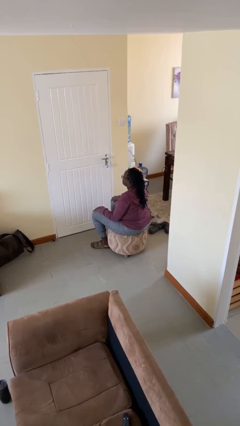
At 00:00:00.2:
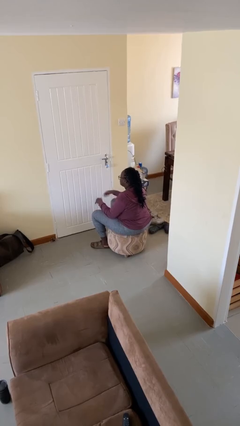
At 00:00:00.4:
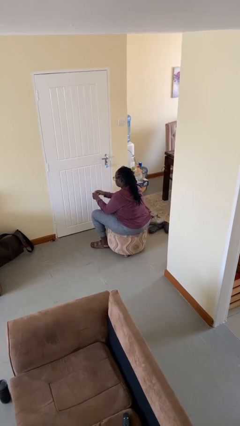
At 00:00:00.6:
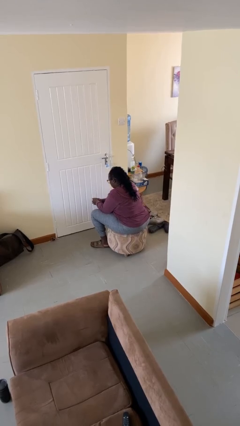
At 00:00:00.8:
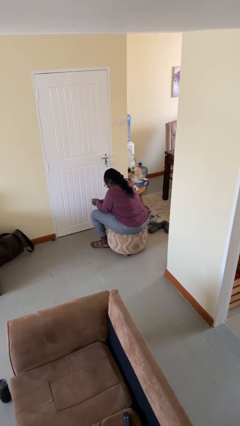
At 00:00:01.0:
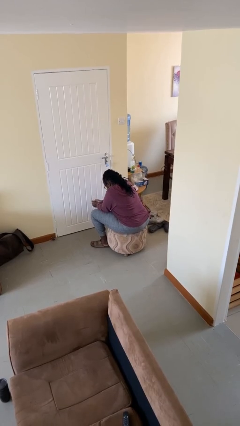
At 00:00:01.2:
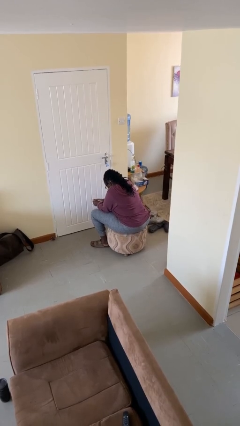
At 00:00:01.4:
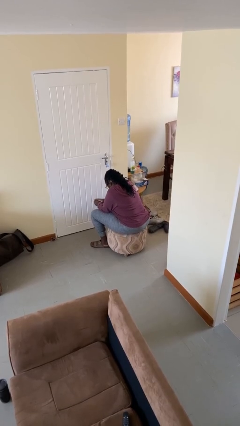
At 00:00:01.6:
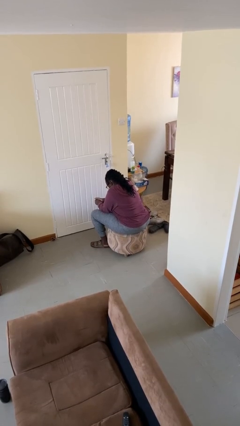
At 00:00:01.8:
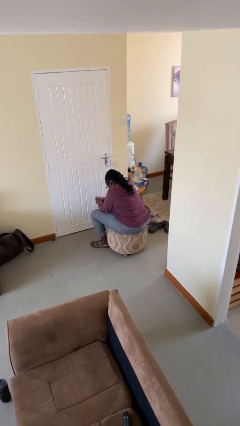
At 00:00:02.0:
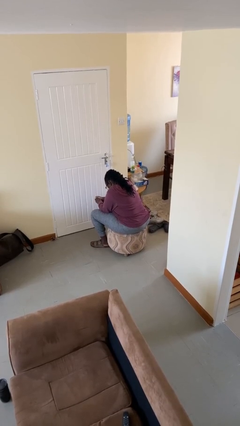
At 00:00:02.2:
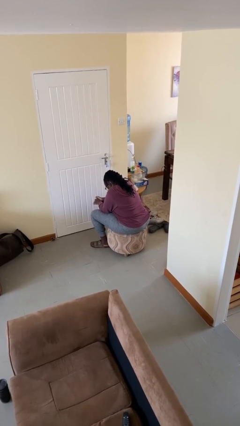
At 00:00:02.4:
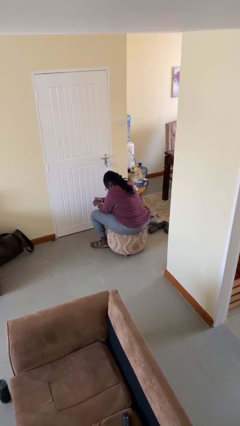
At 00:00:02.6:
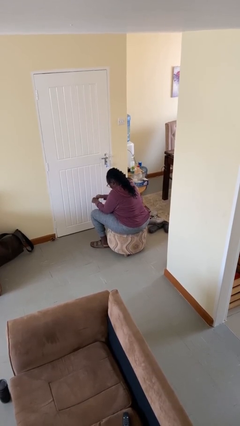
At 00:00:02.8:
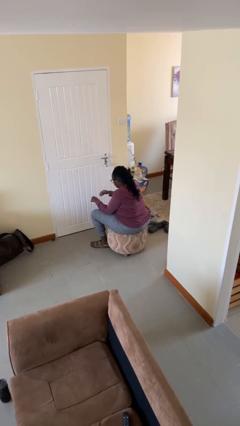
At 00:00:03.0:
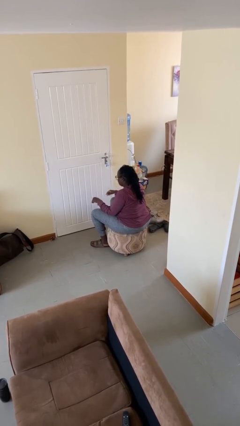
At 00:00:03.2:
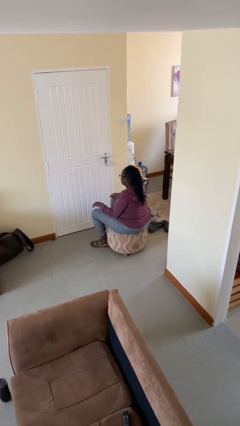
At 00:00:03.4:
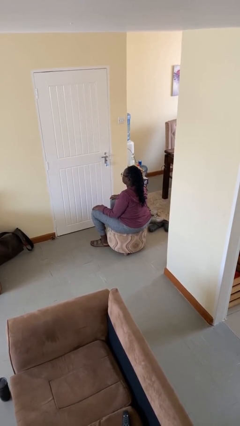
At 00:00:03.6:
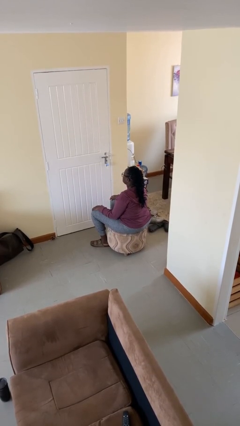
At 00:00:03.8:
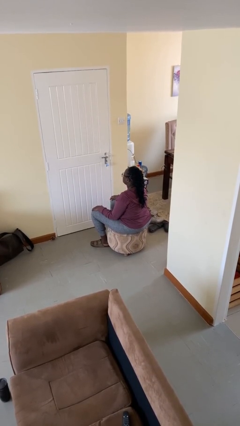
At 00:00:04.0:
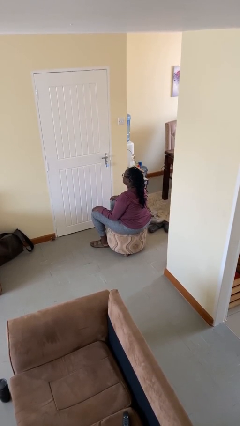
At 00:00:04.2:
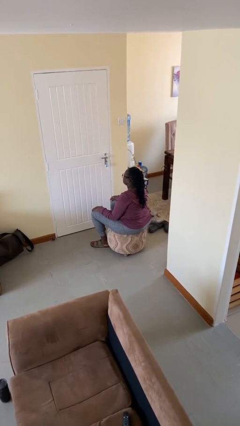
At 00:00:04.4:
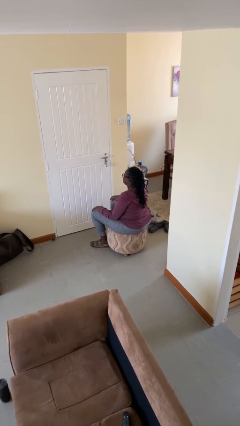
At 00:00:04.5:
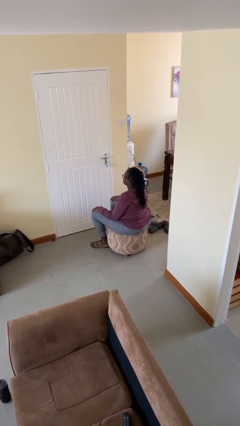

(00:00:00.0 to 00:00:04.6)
person looks at hands in lap

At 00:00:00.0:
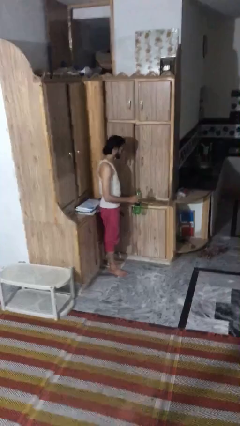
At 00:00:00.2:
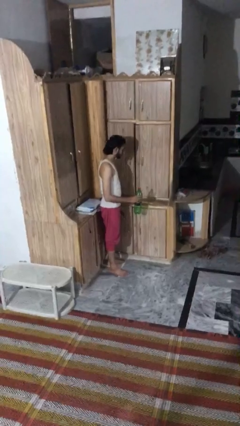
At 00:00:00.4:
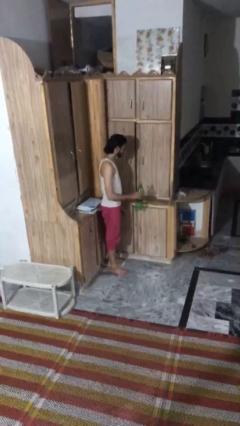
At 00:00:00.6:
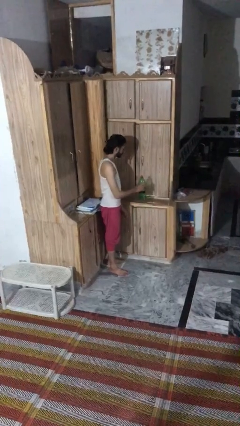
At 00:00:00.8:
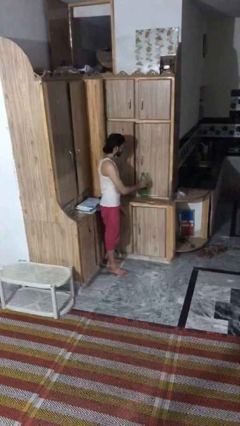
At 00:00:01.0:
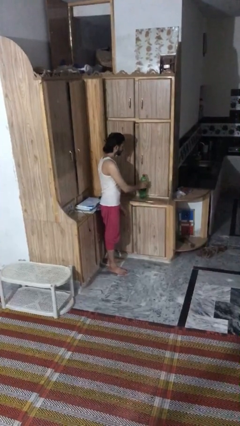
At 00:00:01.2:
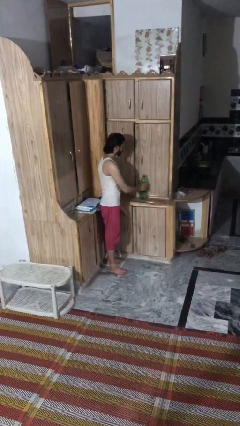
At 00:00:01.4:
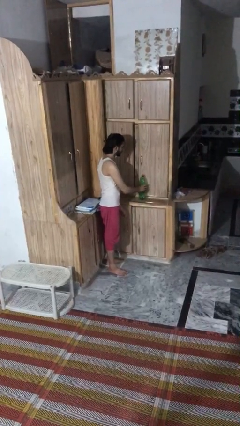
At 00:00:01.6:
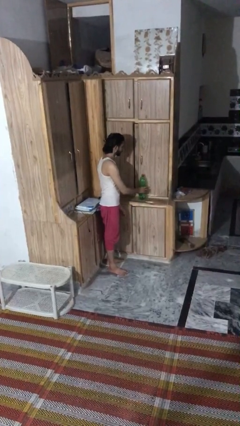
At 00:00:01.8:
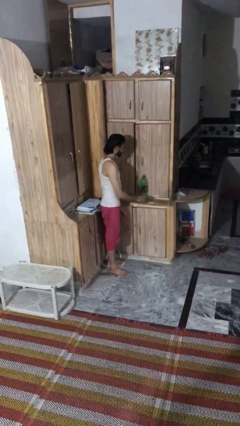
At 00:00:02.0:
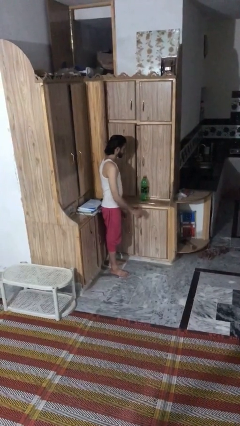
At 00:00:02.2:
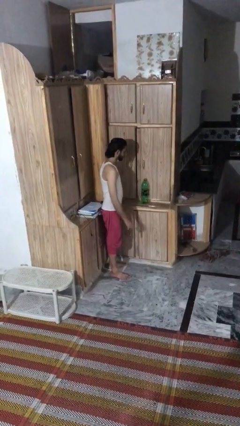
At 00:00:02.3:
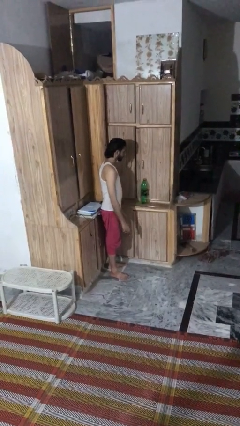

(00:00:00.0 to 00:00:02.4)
person puts down object on countertop

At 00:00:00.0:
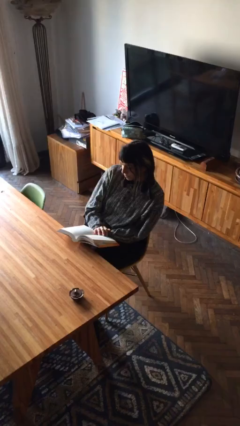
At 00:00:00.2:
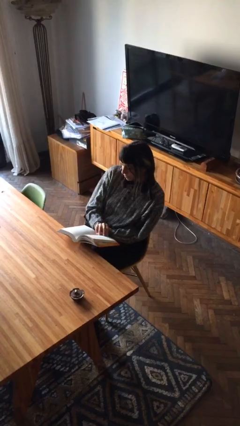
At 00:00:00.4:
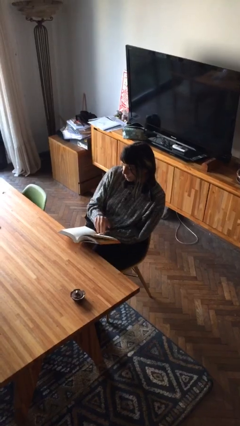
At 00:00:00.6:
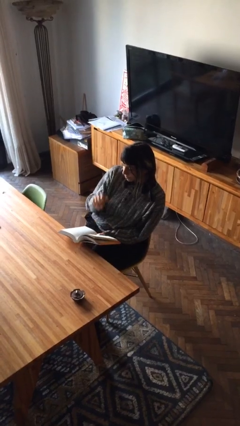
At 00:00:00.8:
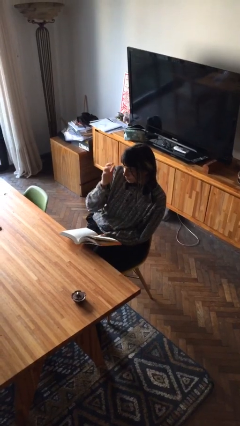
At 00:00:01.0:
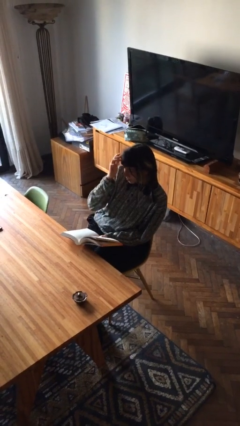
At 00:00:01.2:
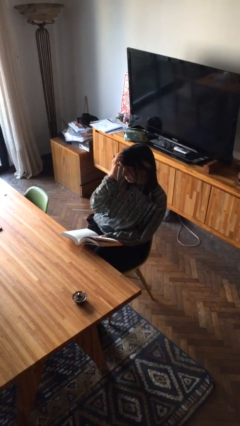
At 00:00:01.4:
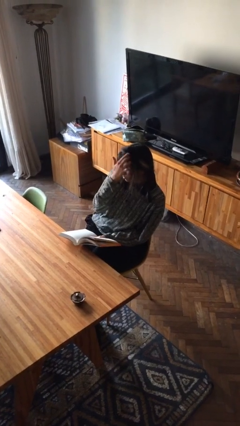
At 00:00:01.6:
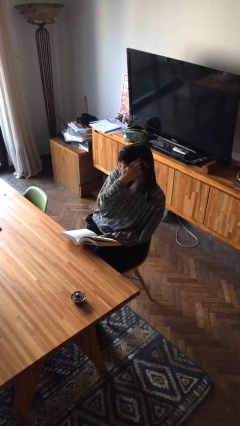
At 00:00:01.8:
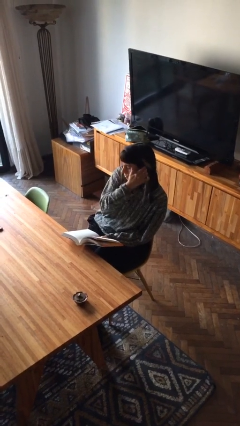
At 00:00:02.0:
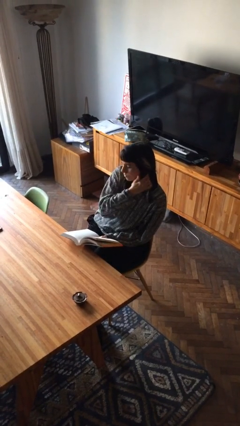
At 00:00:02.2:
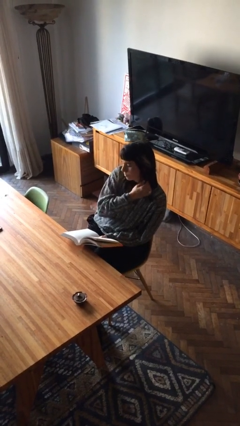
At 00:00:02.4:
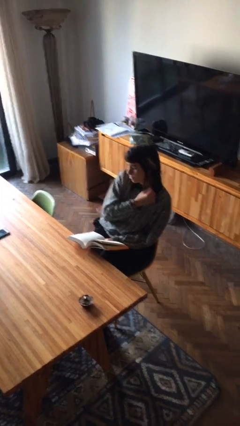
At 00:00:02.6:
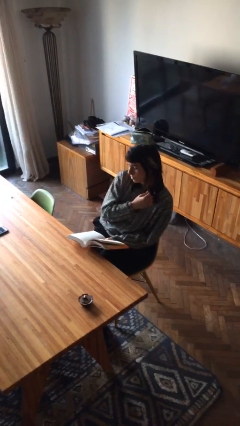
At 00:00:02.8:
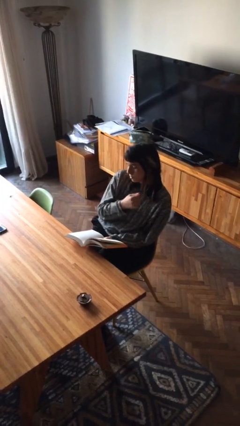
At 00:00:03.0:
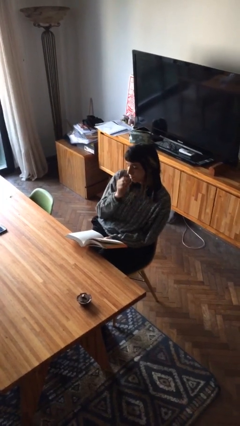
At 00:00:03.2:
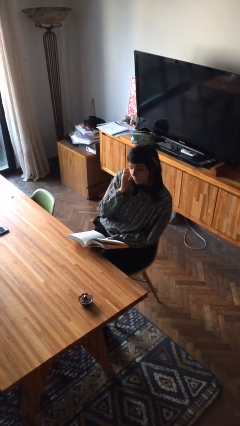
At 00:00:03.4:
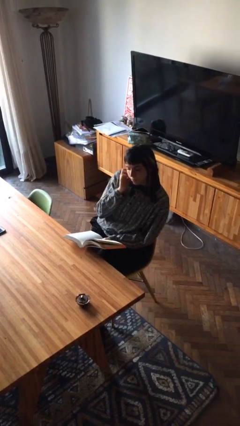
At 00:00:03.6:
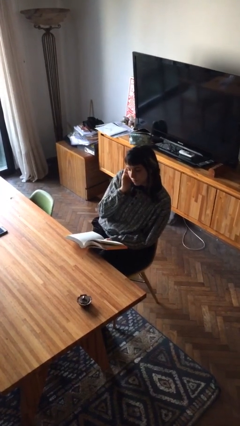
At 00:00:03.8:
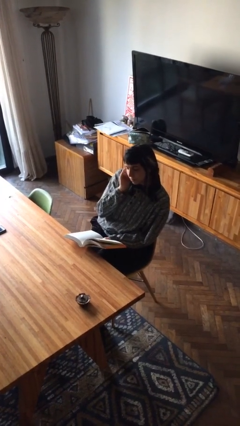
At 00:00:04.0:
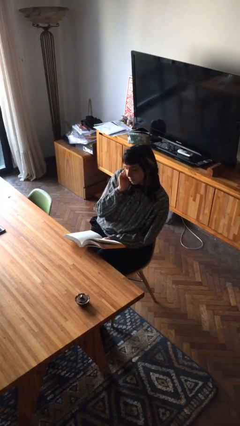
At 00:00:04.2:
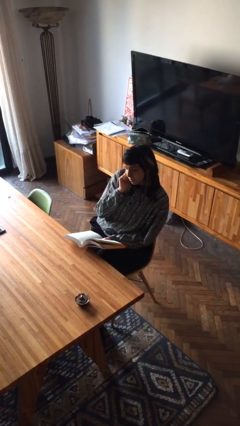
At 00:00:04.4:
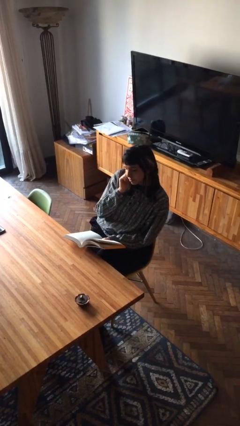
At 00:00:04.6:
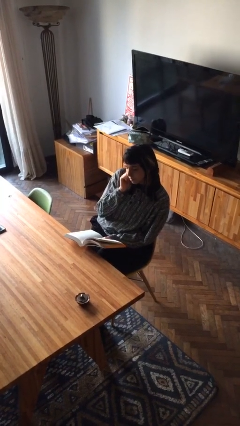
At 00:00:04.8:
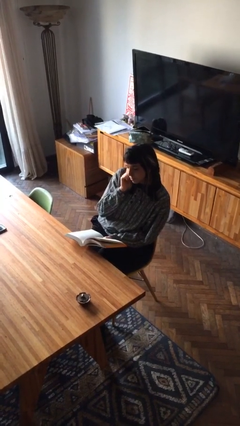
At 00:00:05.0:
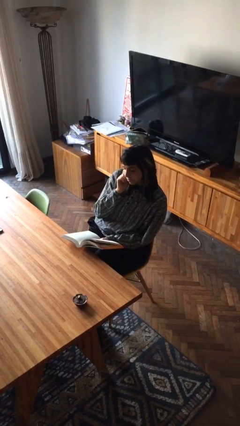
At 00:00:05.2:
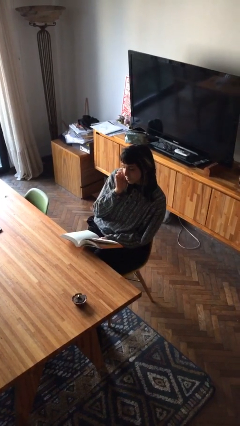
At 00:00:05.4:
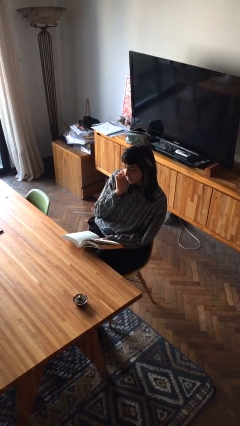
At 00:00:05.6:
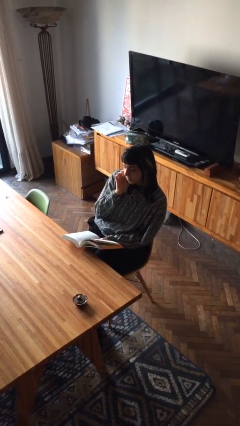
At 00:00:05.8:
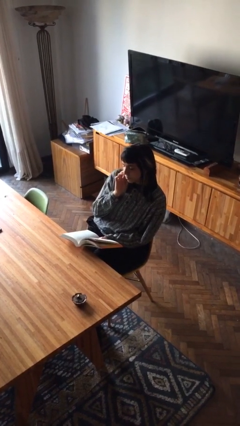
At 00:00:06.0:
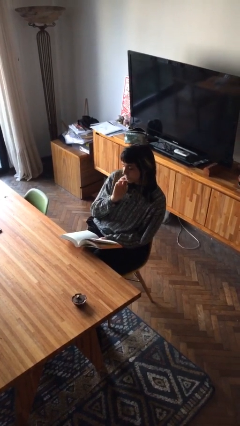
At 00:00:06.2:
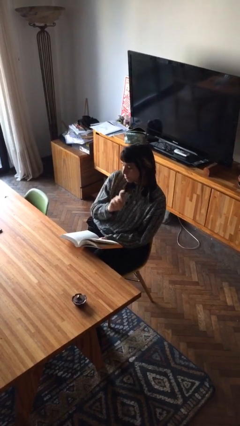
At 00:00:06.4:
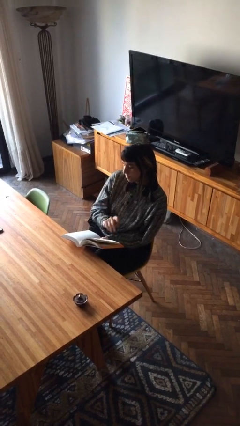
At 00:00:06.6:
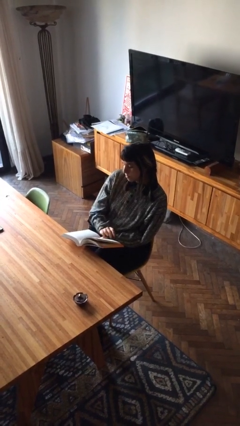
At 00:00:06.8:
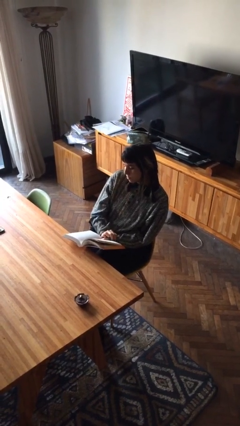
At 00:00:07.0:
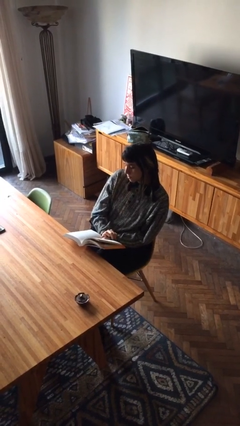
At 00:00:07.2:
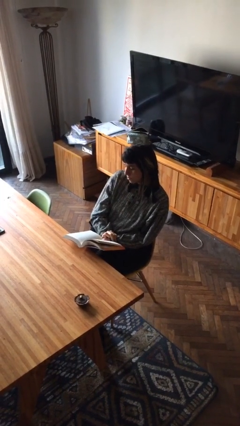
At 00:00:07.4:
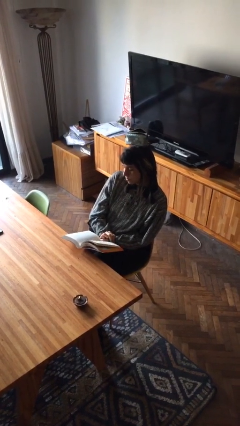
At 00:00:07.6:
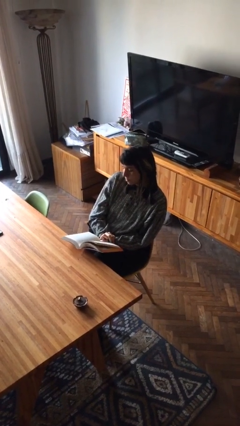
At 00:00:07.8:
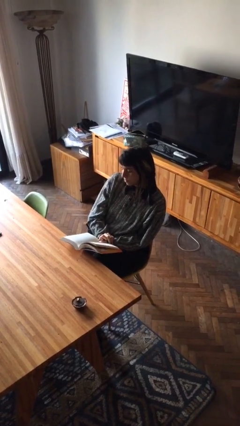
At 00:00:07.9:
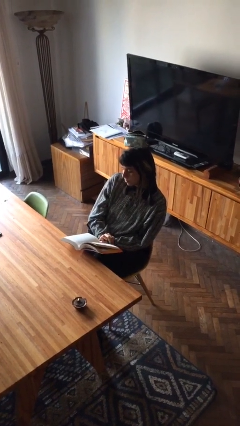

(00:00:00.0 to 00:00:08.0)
person reads document

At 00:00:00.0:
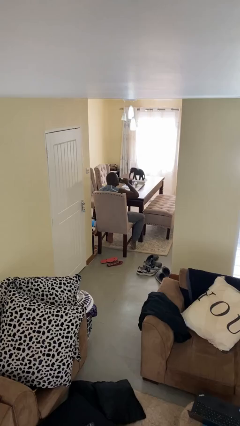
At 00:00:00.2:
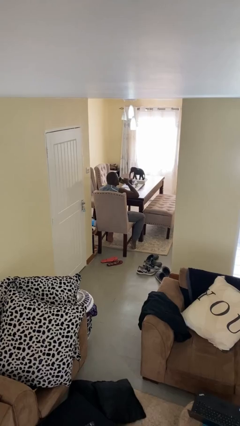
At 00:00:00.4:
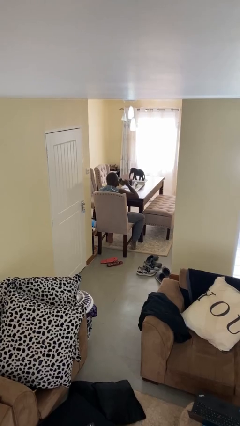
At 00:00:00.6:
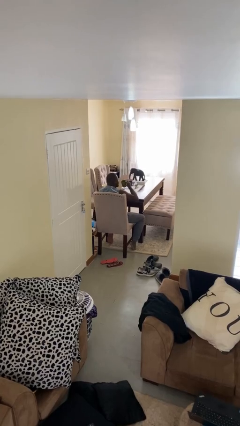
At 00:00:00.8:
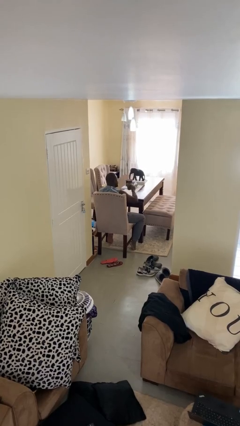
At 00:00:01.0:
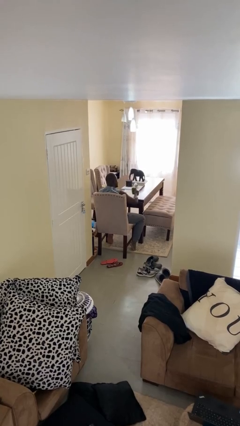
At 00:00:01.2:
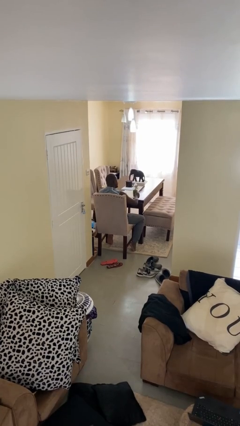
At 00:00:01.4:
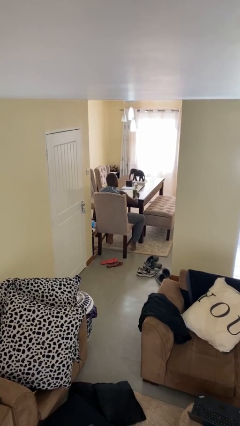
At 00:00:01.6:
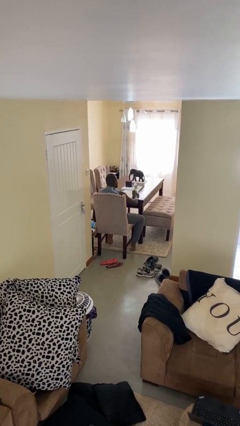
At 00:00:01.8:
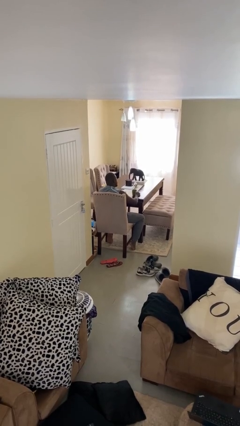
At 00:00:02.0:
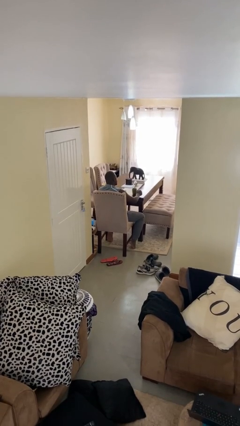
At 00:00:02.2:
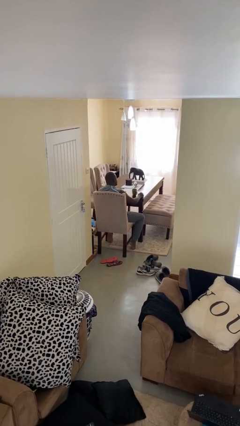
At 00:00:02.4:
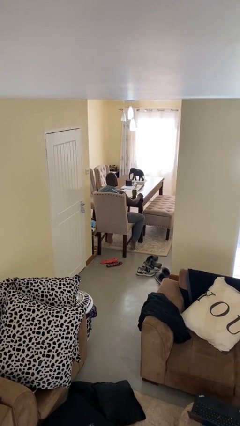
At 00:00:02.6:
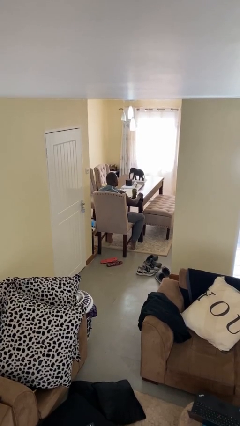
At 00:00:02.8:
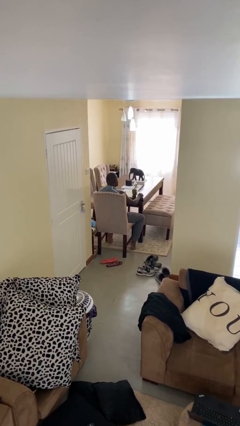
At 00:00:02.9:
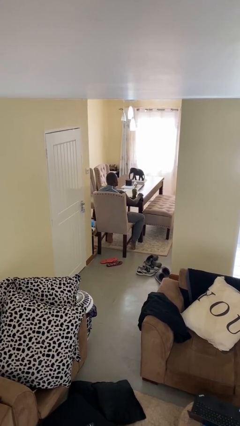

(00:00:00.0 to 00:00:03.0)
person puts down object on table
